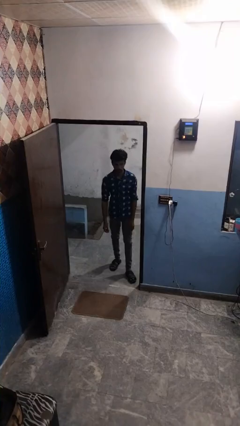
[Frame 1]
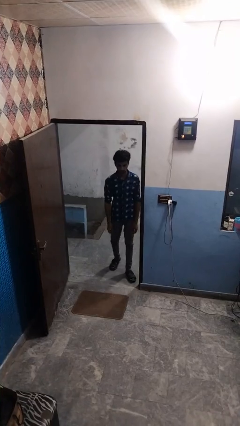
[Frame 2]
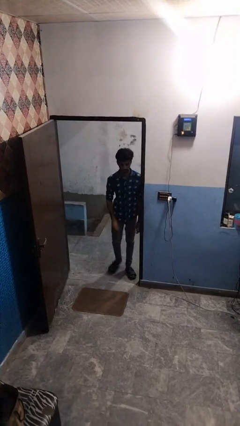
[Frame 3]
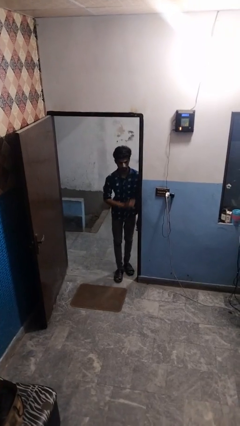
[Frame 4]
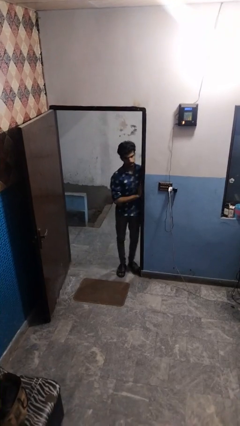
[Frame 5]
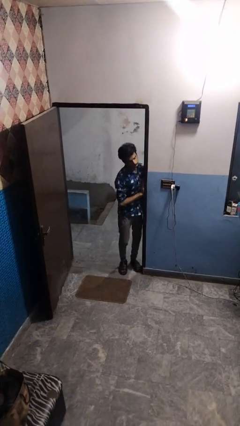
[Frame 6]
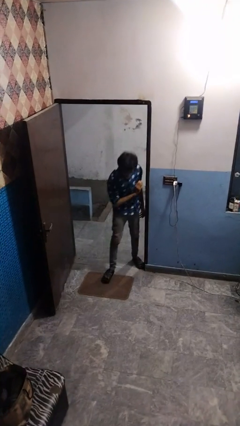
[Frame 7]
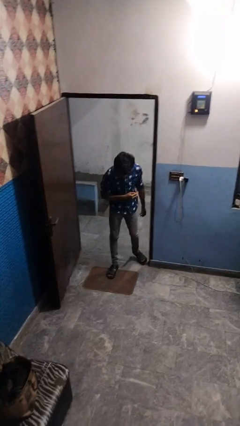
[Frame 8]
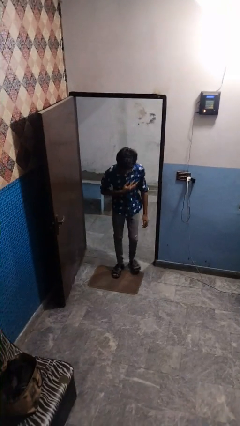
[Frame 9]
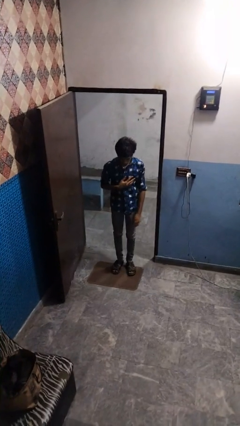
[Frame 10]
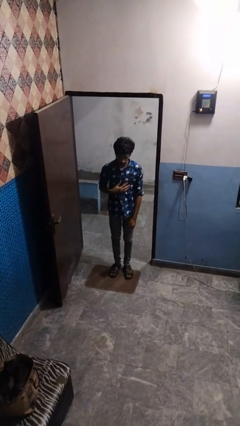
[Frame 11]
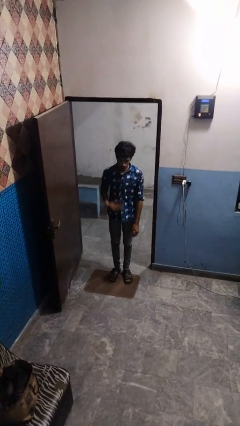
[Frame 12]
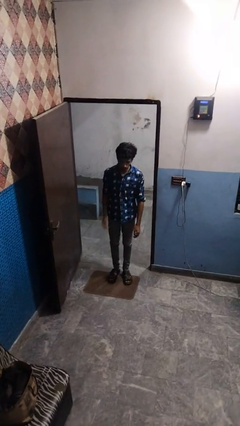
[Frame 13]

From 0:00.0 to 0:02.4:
person bumps into wall

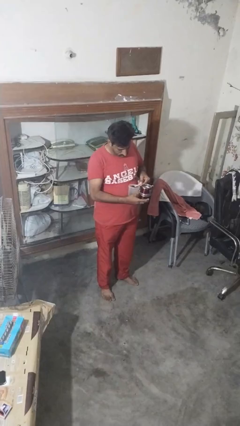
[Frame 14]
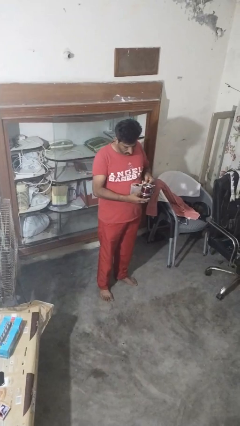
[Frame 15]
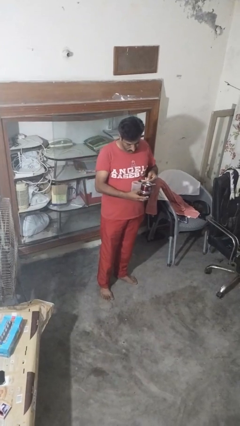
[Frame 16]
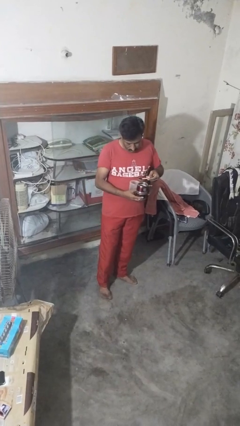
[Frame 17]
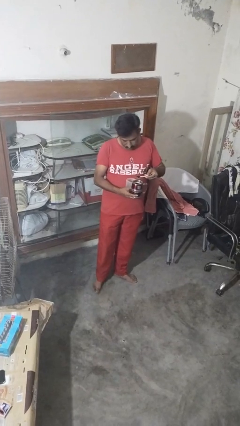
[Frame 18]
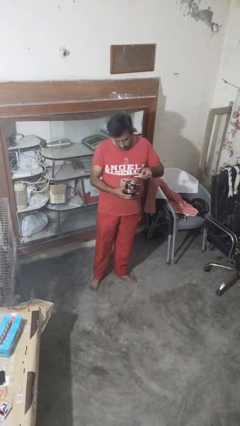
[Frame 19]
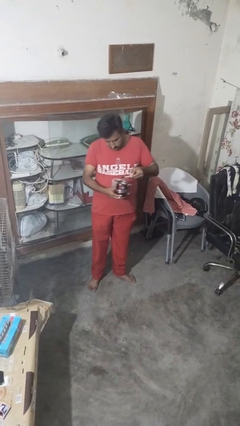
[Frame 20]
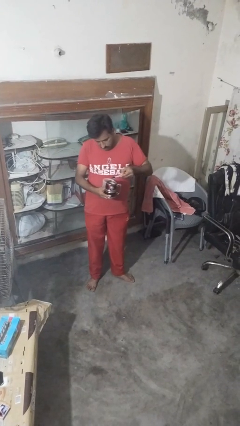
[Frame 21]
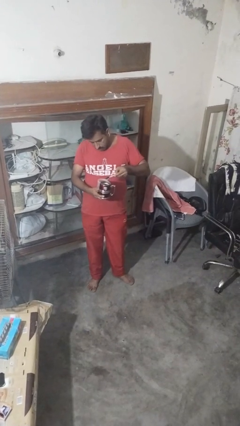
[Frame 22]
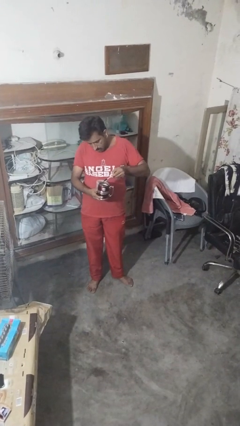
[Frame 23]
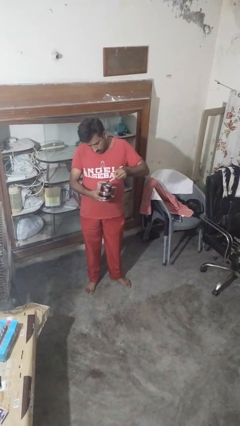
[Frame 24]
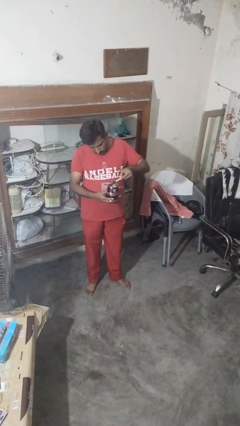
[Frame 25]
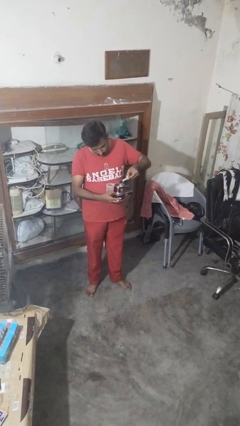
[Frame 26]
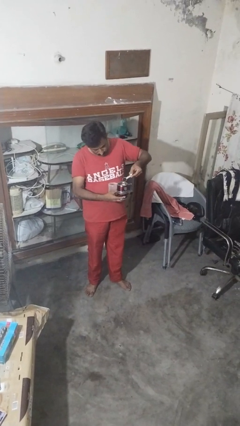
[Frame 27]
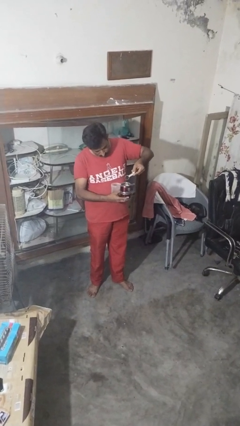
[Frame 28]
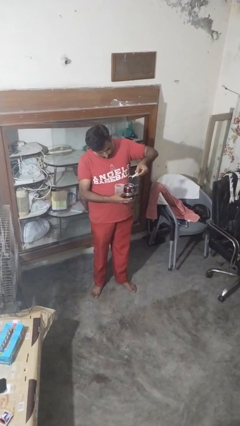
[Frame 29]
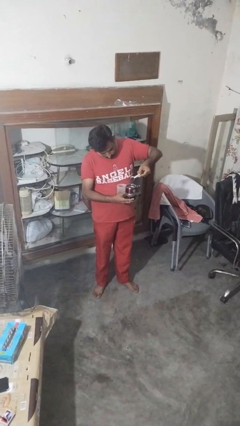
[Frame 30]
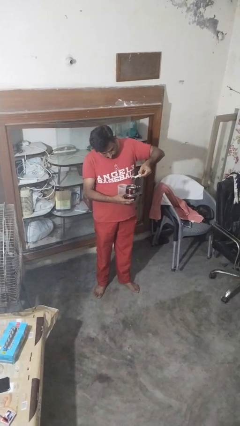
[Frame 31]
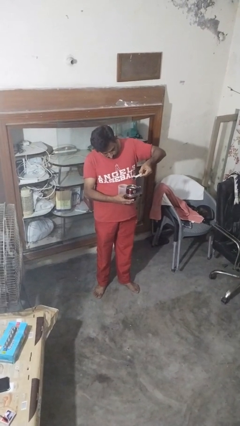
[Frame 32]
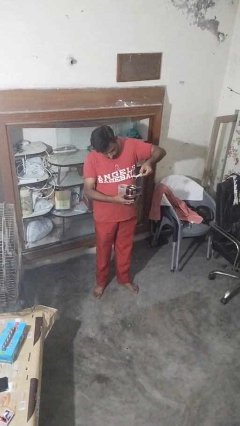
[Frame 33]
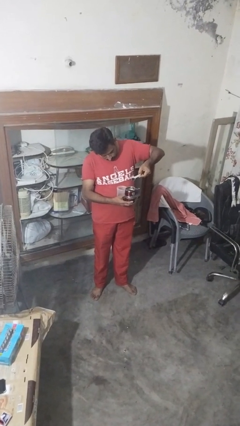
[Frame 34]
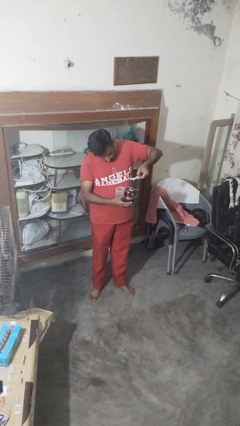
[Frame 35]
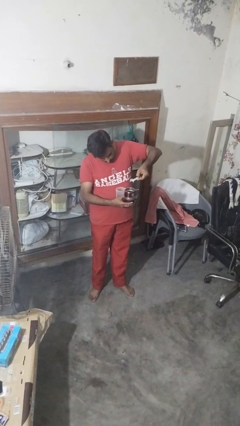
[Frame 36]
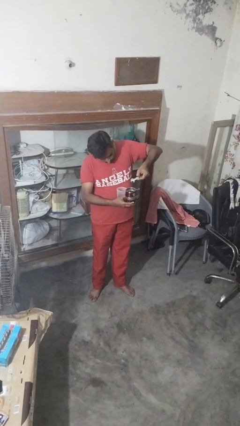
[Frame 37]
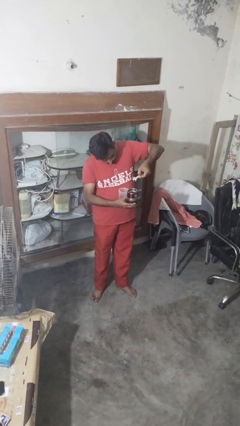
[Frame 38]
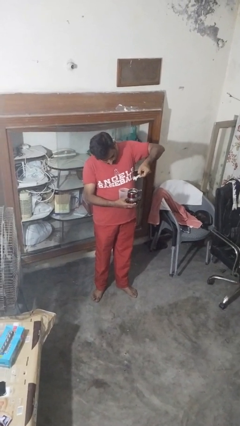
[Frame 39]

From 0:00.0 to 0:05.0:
person pours coffee into mug

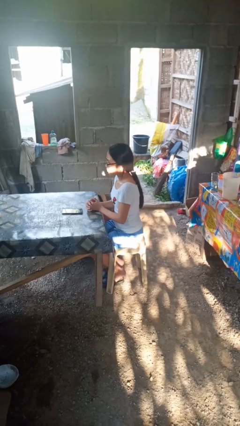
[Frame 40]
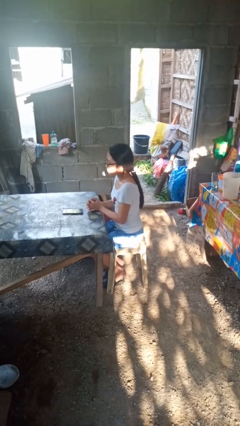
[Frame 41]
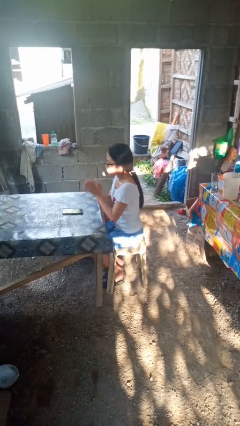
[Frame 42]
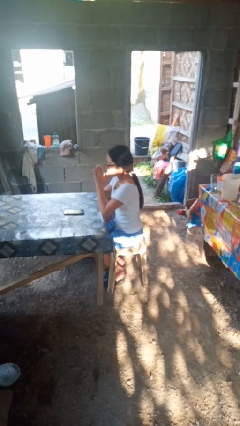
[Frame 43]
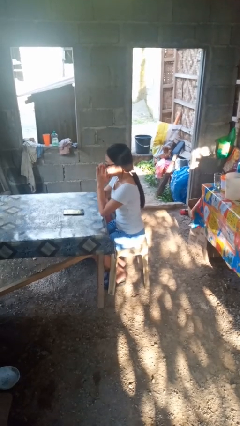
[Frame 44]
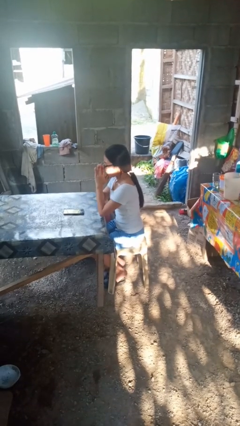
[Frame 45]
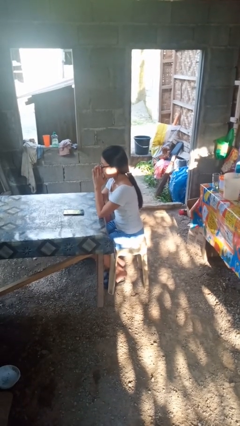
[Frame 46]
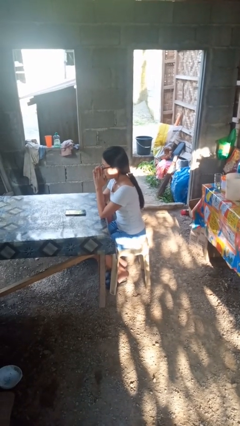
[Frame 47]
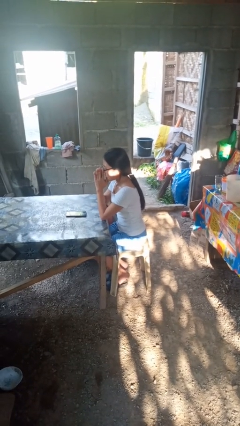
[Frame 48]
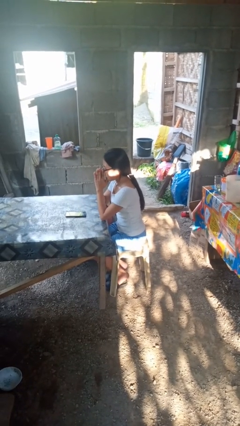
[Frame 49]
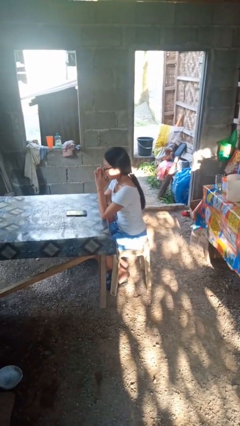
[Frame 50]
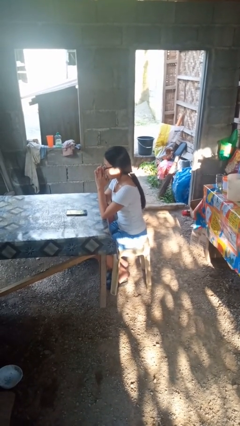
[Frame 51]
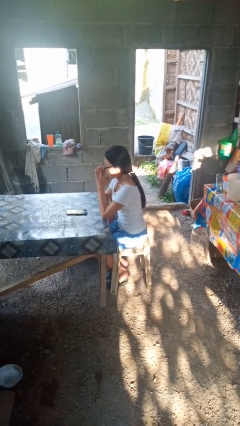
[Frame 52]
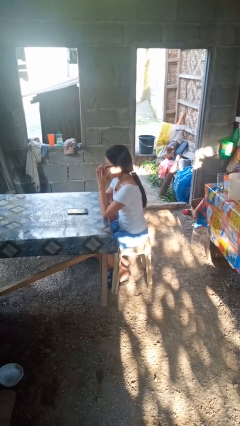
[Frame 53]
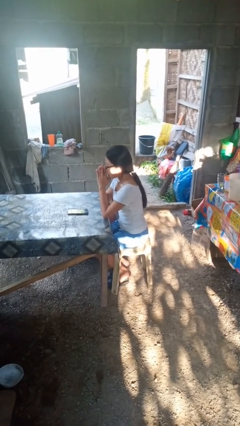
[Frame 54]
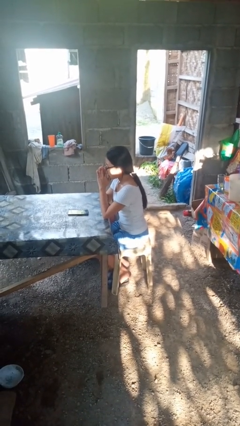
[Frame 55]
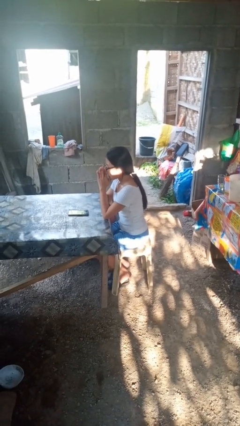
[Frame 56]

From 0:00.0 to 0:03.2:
person prays

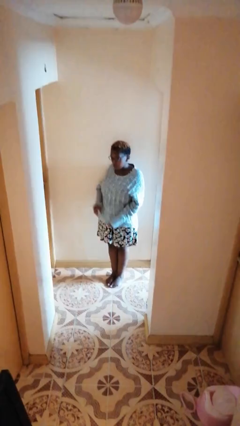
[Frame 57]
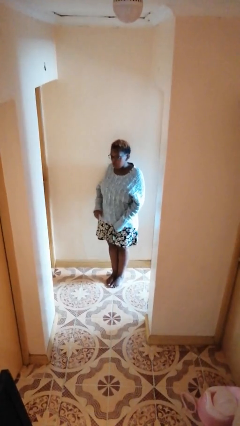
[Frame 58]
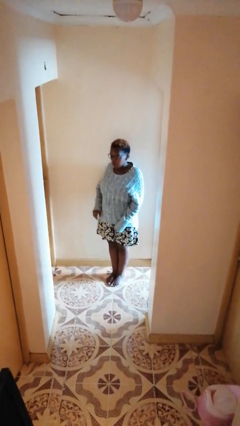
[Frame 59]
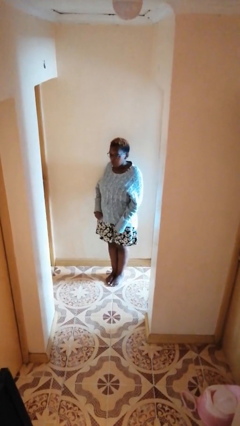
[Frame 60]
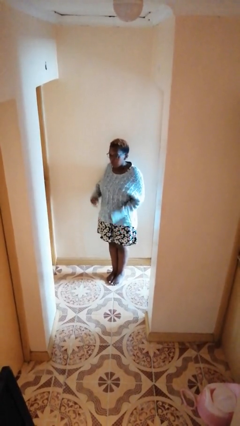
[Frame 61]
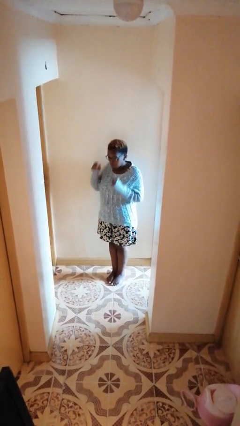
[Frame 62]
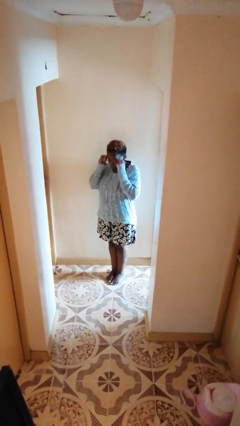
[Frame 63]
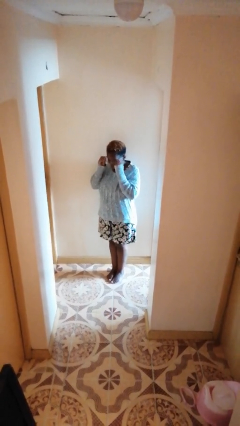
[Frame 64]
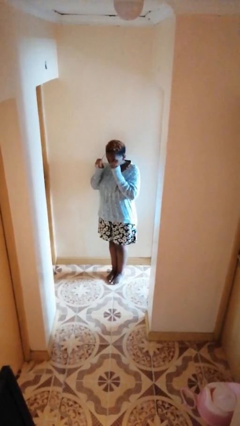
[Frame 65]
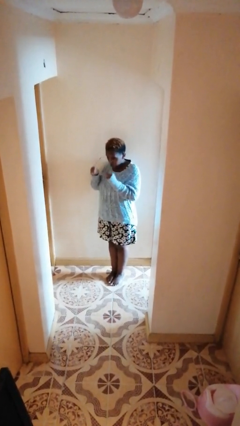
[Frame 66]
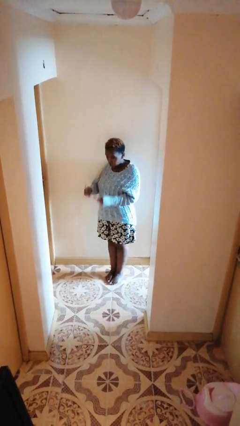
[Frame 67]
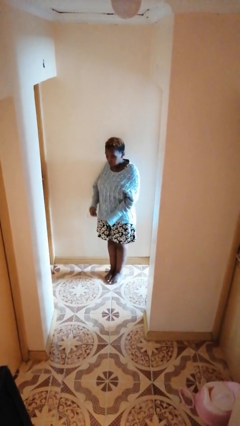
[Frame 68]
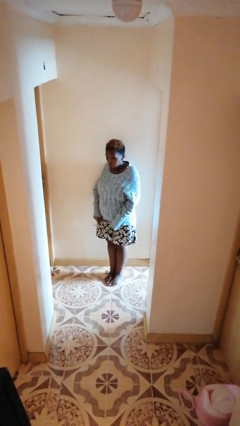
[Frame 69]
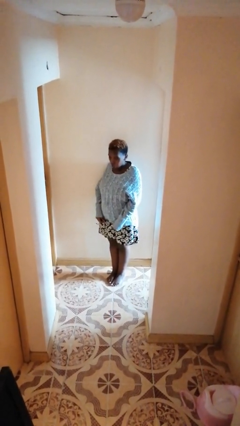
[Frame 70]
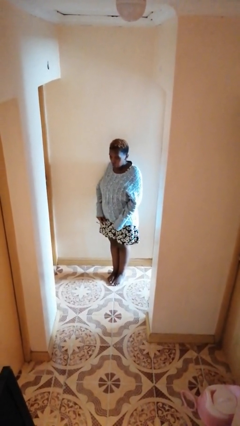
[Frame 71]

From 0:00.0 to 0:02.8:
person takes off glasses

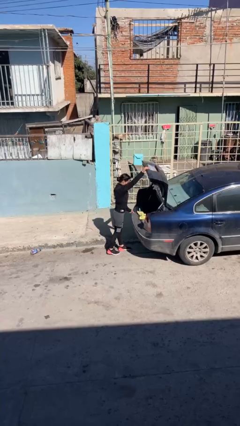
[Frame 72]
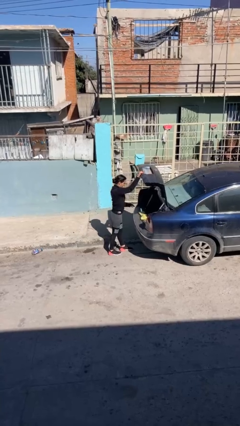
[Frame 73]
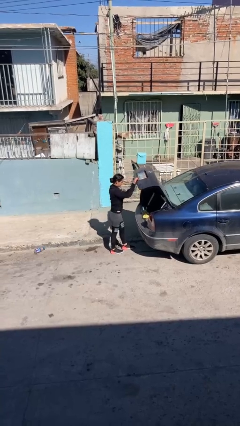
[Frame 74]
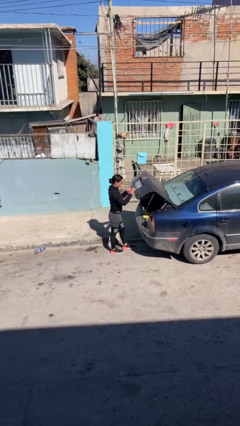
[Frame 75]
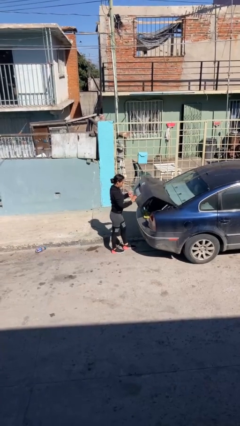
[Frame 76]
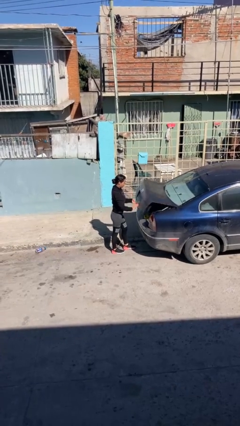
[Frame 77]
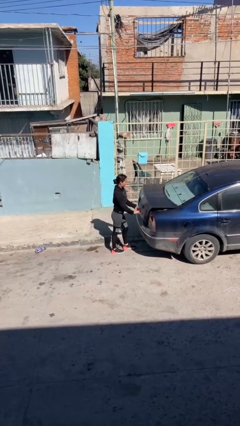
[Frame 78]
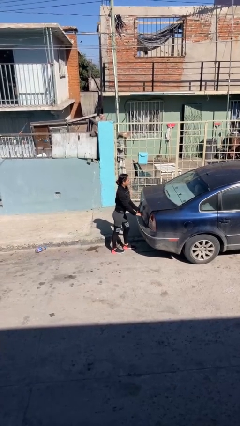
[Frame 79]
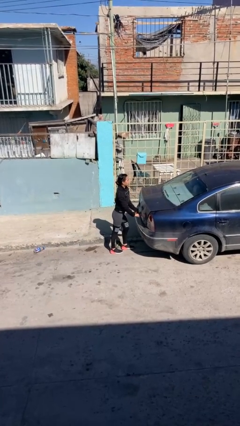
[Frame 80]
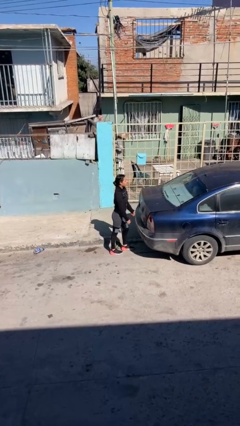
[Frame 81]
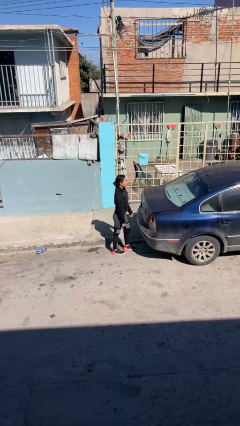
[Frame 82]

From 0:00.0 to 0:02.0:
person closes car trunk

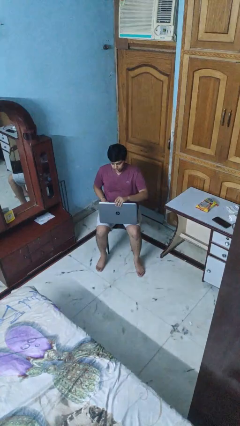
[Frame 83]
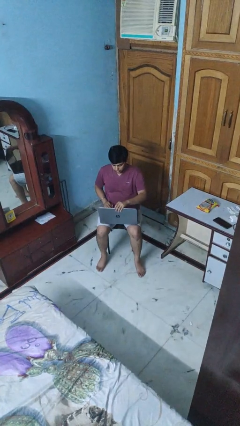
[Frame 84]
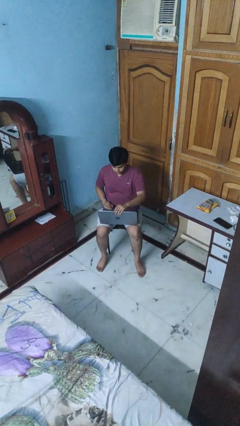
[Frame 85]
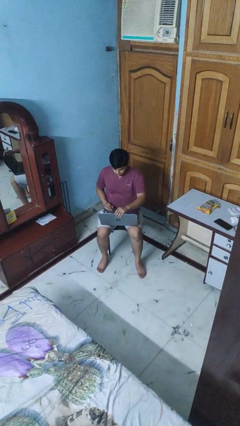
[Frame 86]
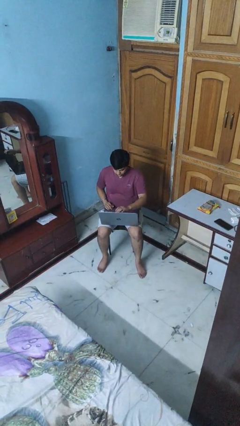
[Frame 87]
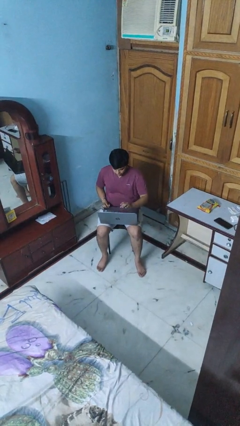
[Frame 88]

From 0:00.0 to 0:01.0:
person opens laptop

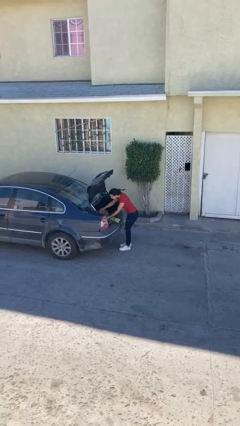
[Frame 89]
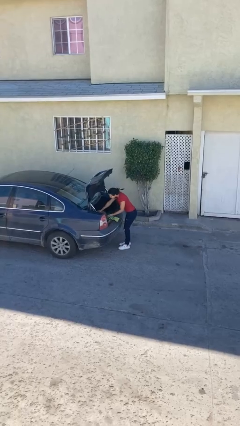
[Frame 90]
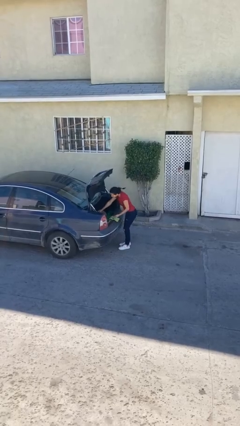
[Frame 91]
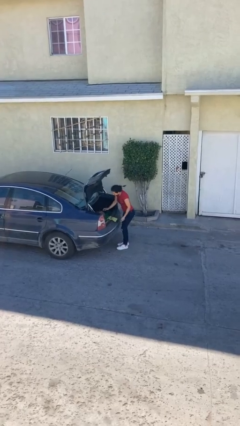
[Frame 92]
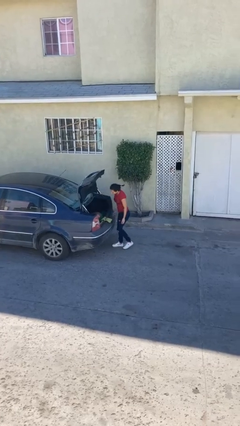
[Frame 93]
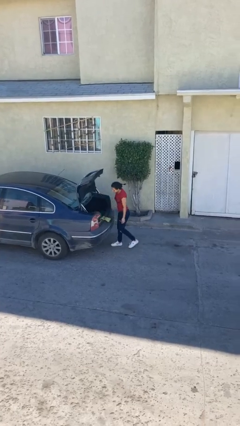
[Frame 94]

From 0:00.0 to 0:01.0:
person loads car
